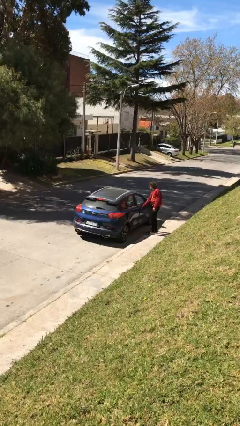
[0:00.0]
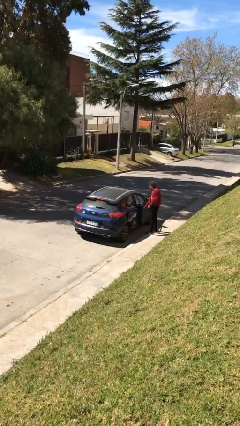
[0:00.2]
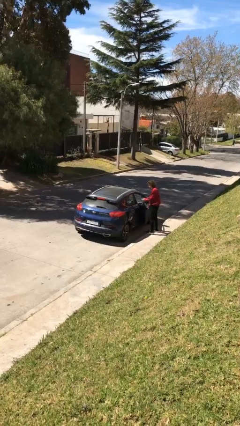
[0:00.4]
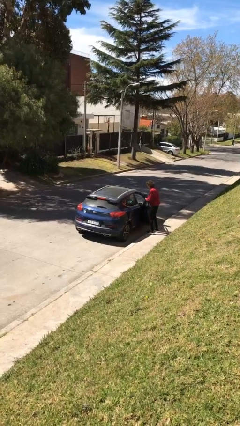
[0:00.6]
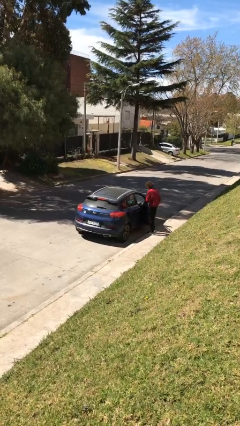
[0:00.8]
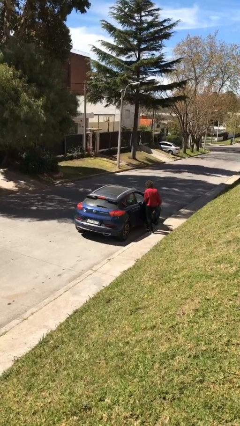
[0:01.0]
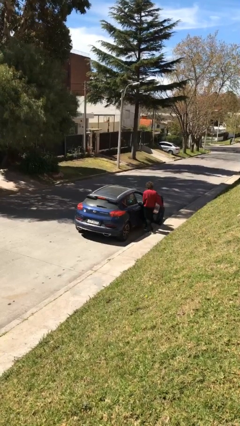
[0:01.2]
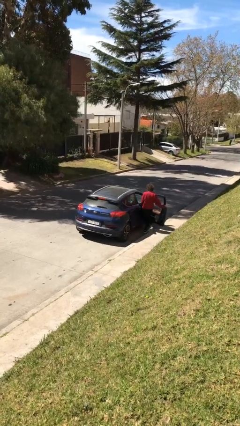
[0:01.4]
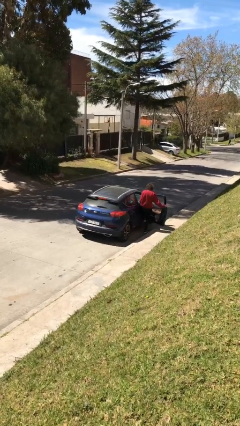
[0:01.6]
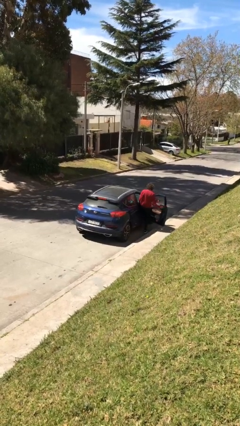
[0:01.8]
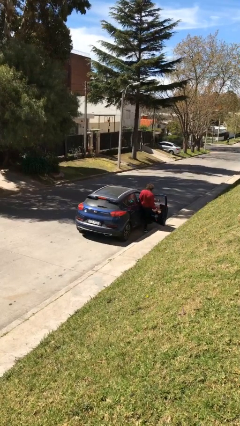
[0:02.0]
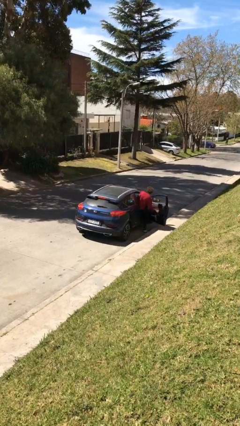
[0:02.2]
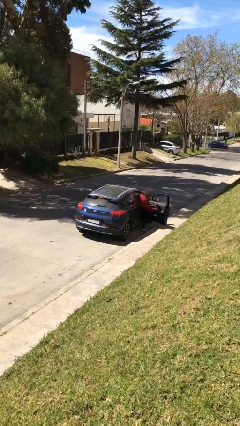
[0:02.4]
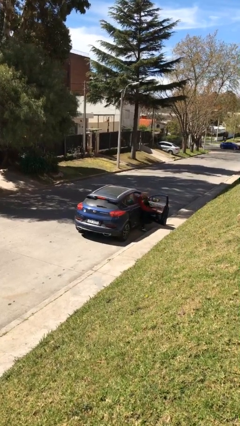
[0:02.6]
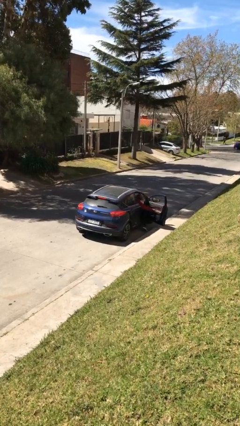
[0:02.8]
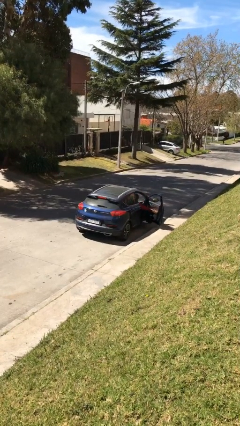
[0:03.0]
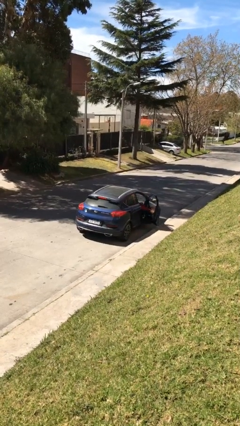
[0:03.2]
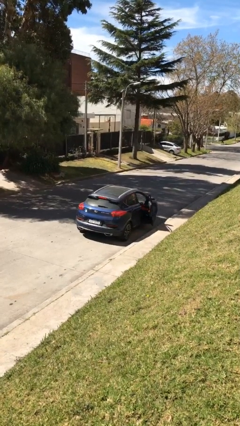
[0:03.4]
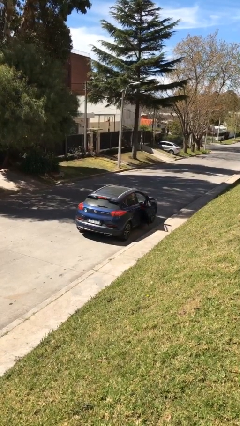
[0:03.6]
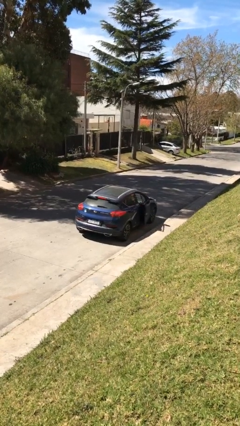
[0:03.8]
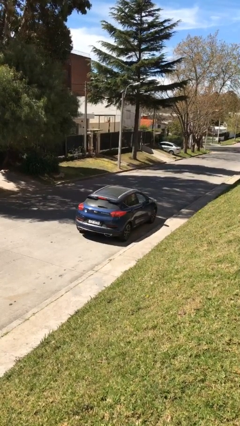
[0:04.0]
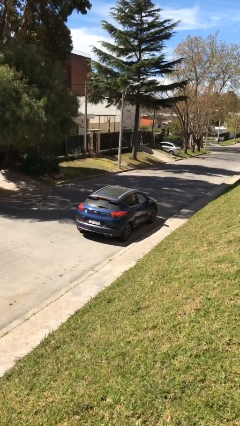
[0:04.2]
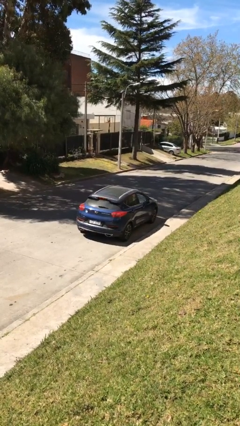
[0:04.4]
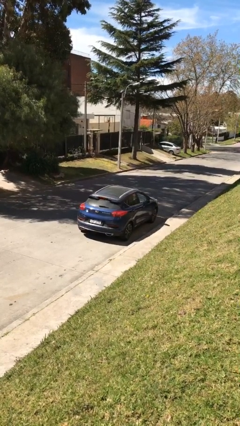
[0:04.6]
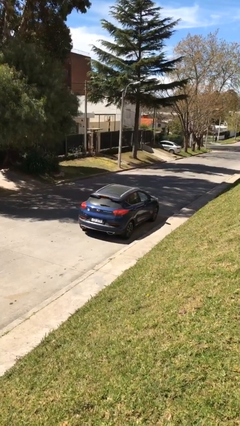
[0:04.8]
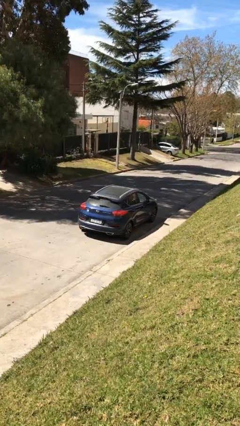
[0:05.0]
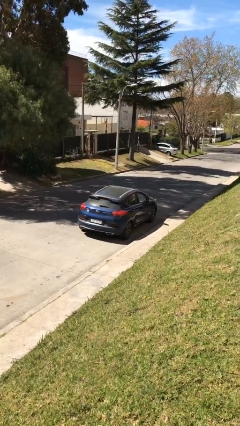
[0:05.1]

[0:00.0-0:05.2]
car picks up person

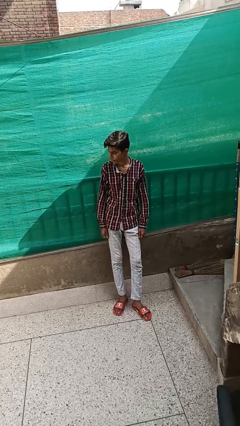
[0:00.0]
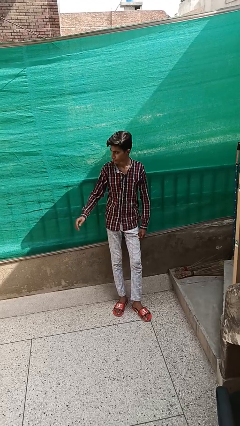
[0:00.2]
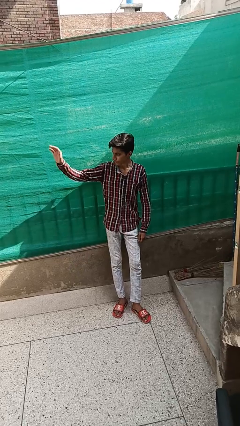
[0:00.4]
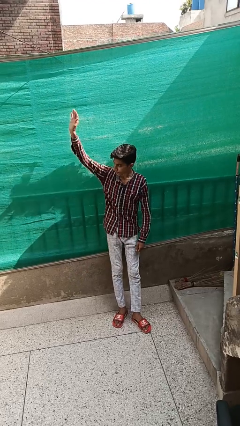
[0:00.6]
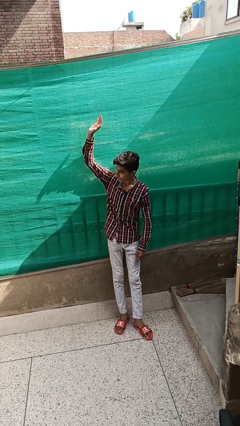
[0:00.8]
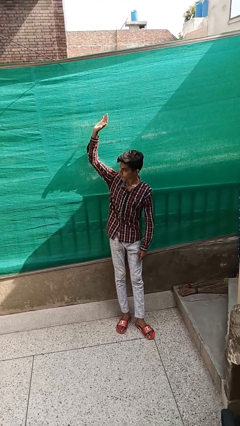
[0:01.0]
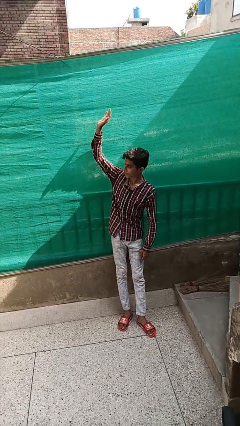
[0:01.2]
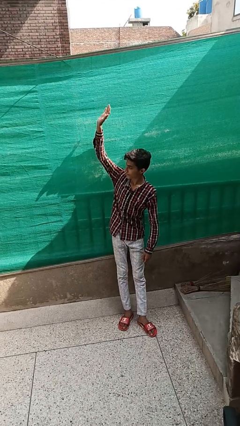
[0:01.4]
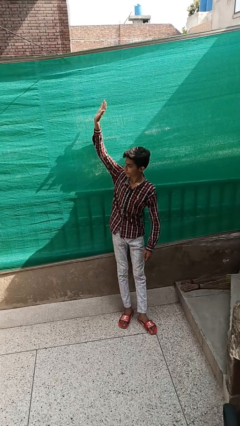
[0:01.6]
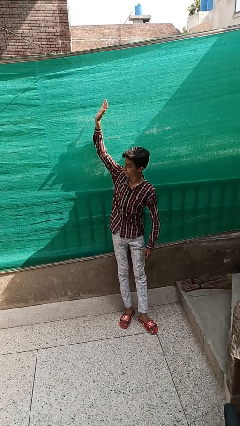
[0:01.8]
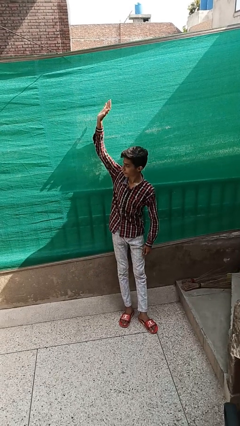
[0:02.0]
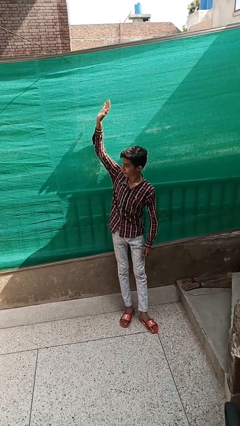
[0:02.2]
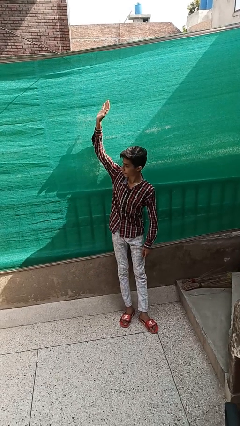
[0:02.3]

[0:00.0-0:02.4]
person gestures raise hand

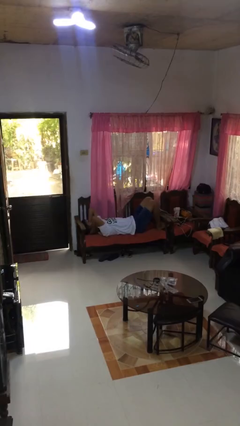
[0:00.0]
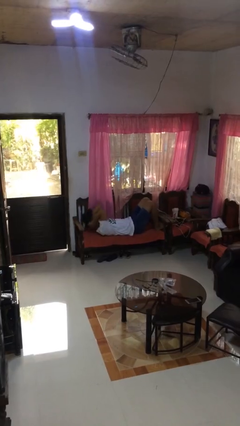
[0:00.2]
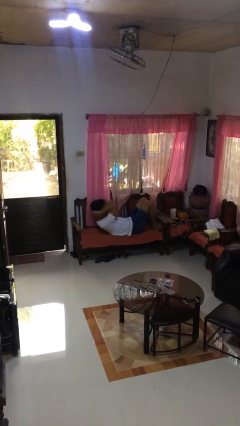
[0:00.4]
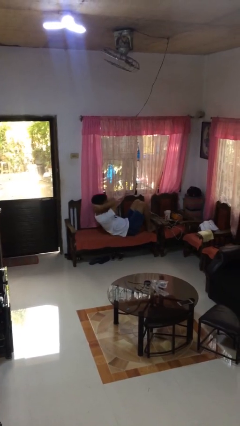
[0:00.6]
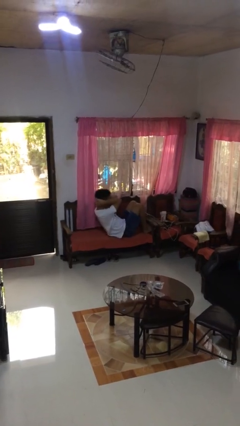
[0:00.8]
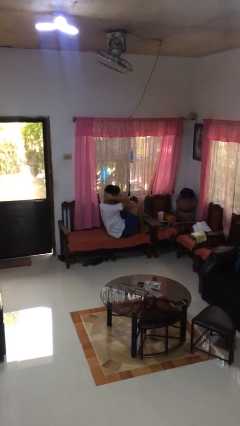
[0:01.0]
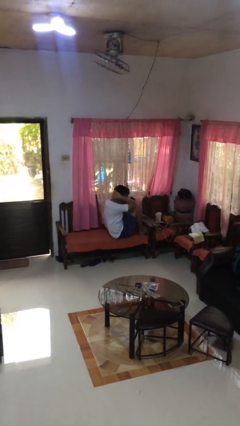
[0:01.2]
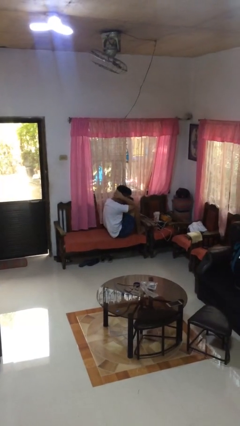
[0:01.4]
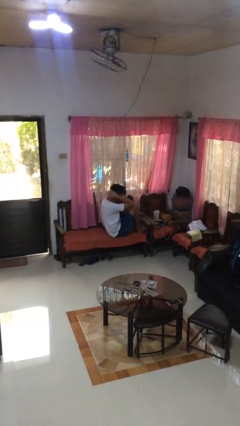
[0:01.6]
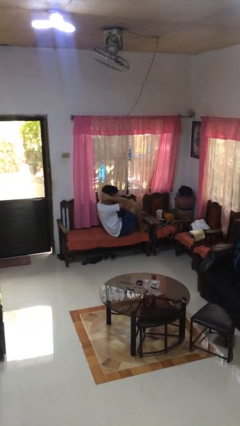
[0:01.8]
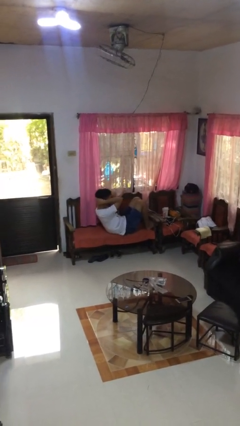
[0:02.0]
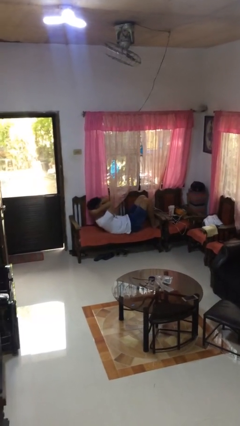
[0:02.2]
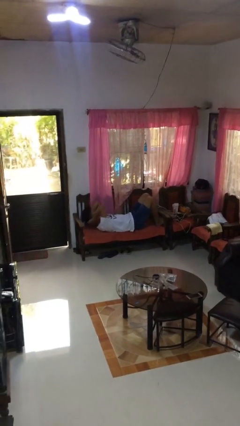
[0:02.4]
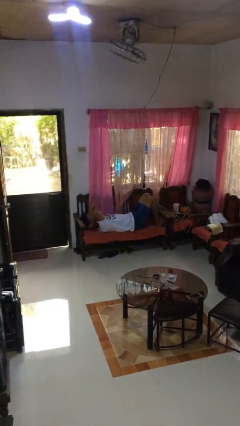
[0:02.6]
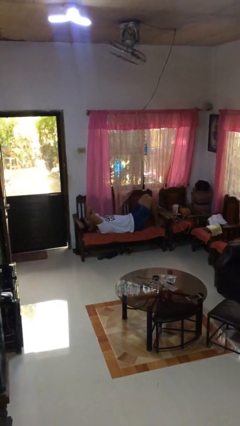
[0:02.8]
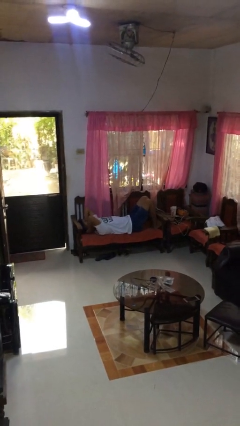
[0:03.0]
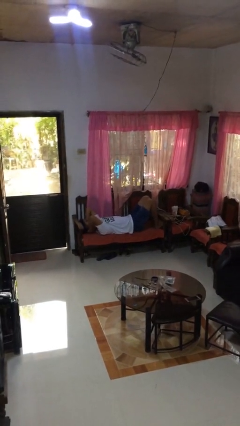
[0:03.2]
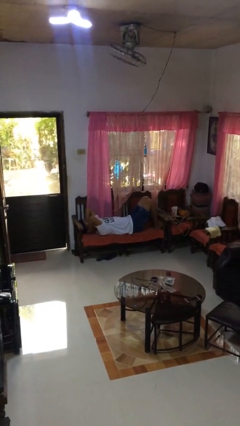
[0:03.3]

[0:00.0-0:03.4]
person exercises with situp

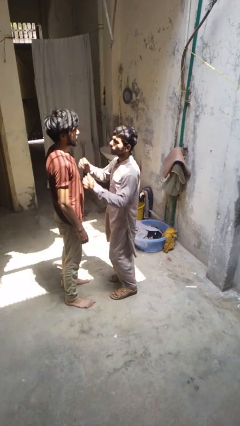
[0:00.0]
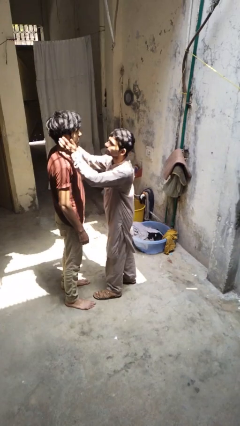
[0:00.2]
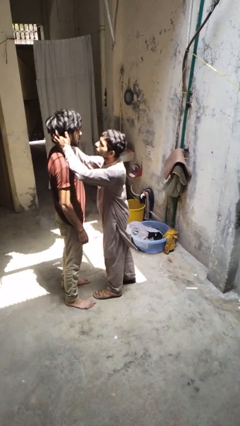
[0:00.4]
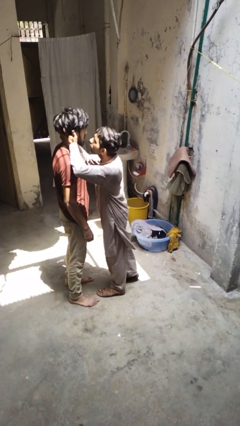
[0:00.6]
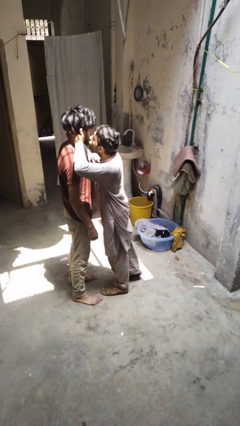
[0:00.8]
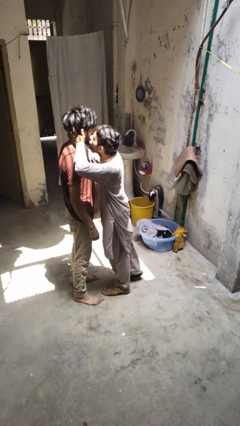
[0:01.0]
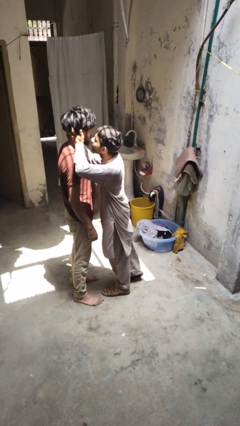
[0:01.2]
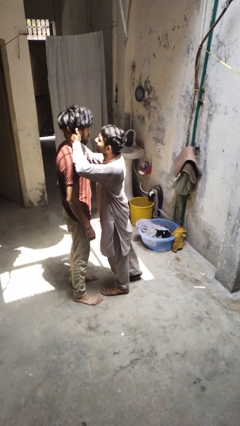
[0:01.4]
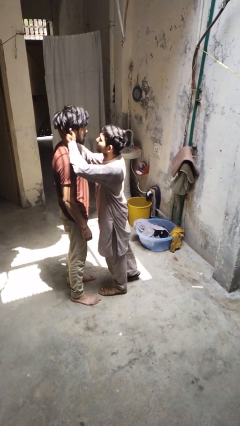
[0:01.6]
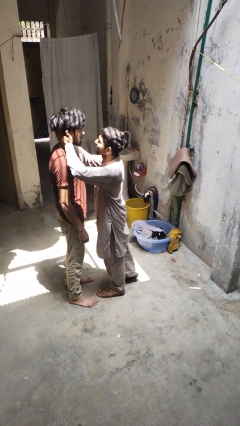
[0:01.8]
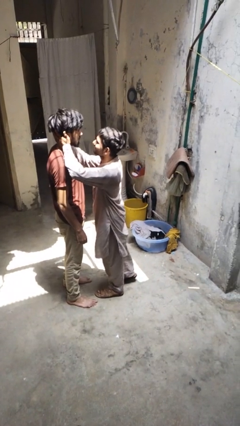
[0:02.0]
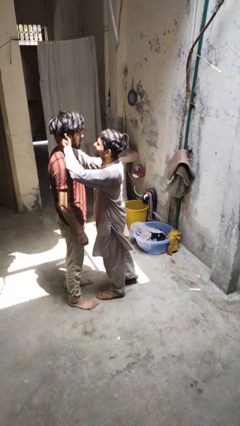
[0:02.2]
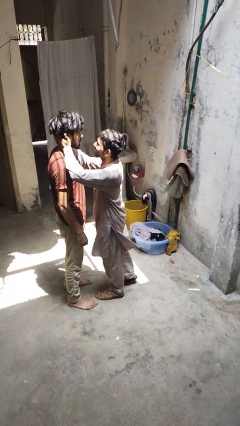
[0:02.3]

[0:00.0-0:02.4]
person kisses cheek of person

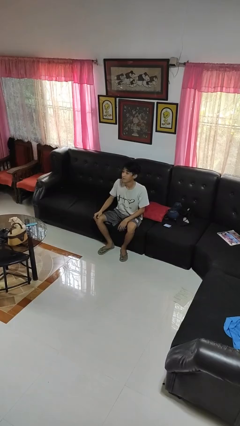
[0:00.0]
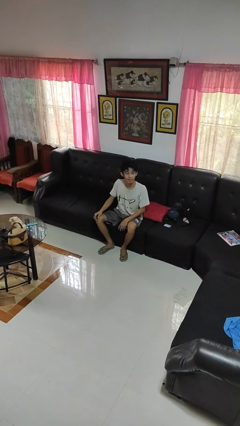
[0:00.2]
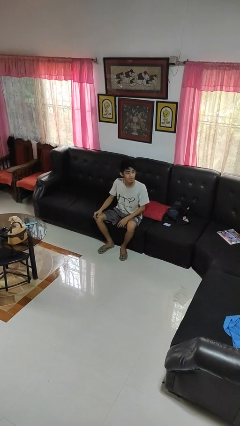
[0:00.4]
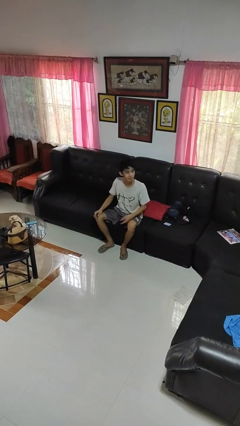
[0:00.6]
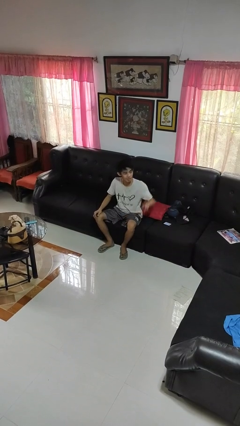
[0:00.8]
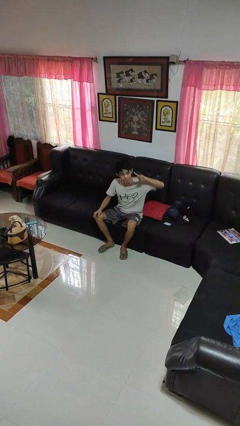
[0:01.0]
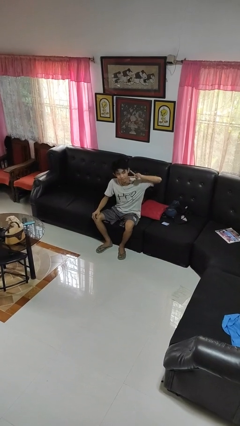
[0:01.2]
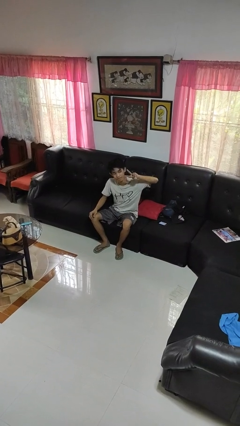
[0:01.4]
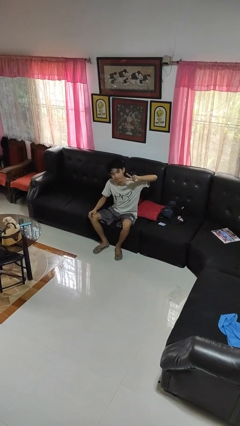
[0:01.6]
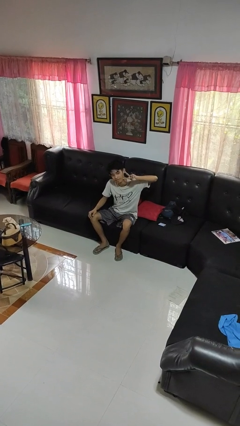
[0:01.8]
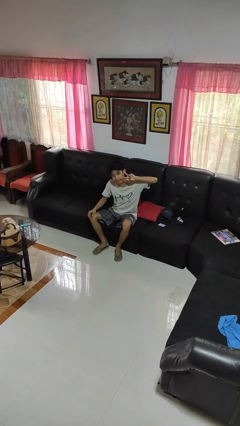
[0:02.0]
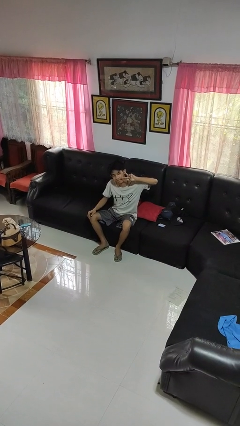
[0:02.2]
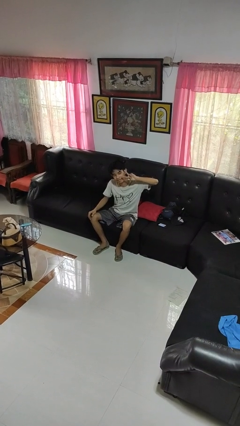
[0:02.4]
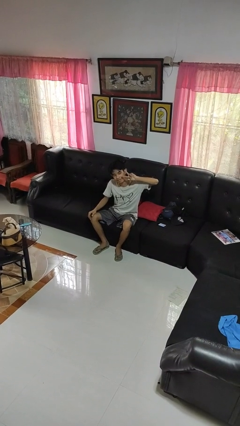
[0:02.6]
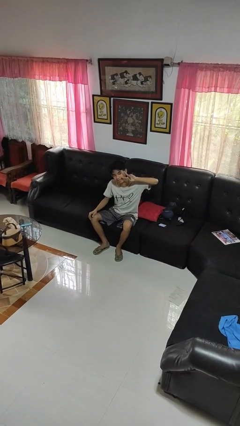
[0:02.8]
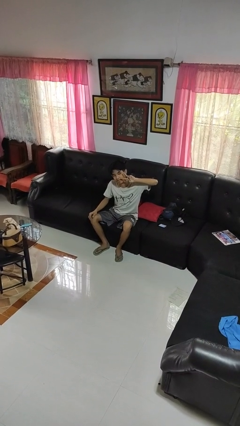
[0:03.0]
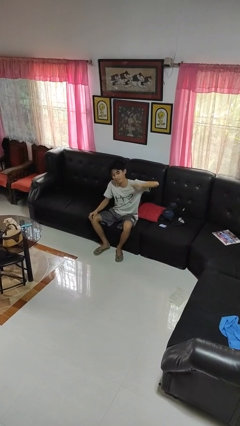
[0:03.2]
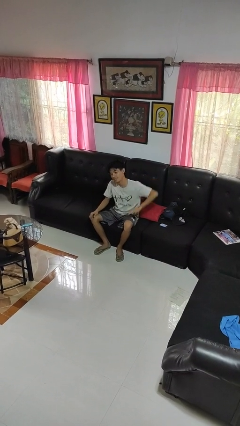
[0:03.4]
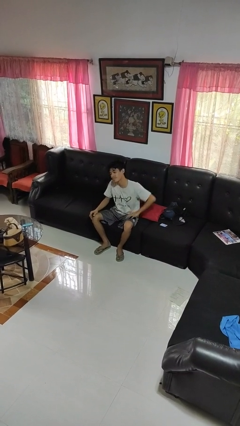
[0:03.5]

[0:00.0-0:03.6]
person gestures peace

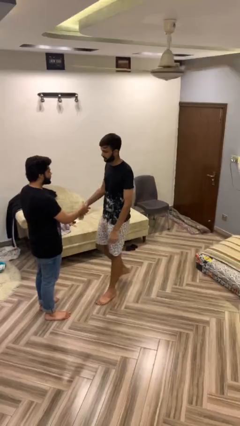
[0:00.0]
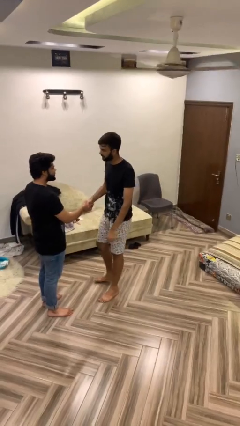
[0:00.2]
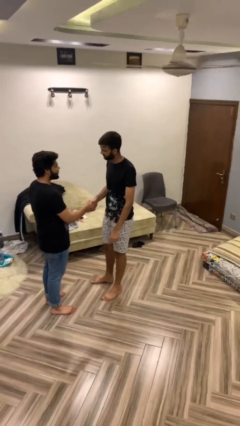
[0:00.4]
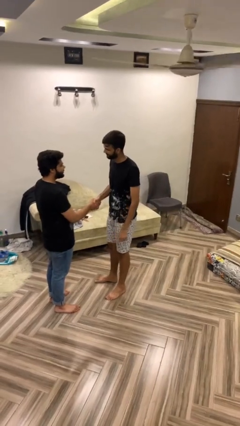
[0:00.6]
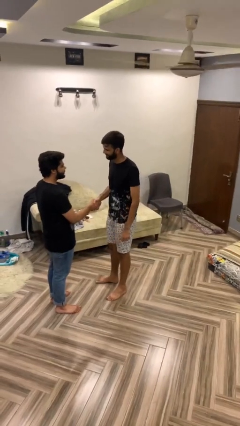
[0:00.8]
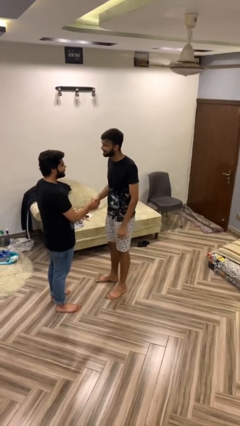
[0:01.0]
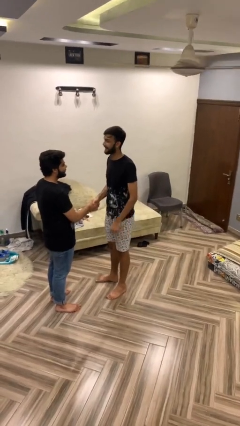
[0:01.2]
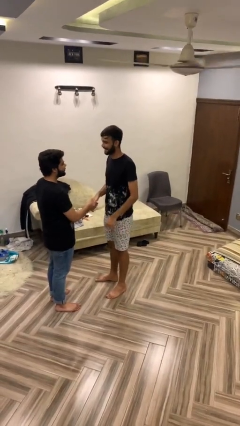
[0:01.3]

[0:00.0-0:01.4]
person shakes hand
